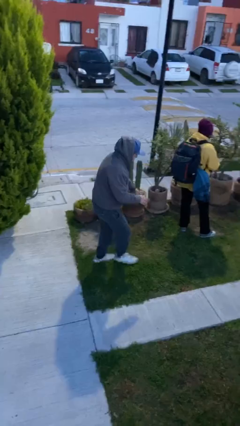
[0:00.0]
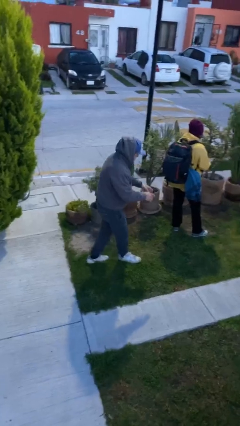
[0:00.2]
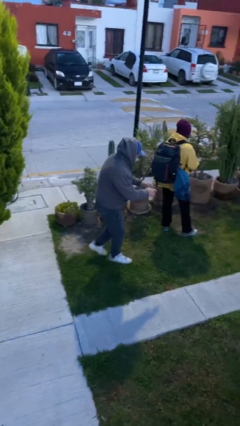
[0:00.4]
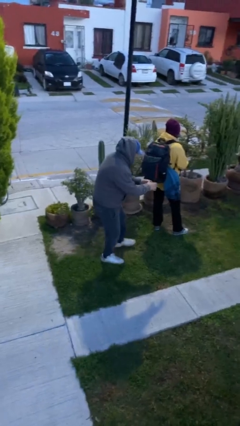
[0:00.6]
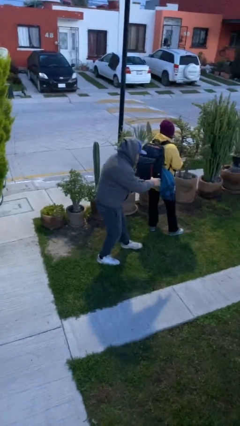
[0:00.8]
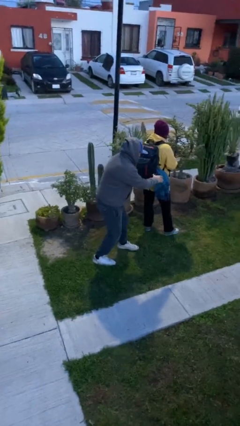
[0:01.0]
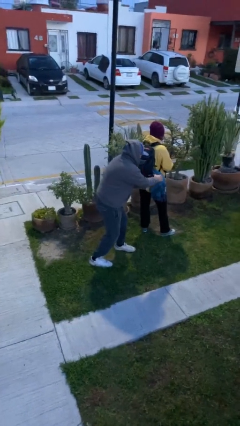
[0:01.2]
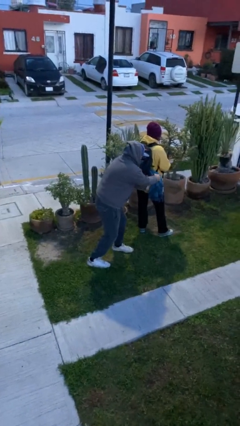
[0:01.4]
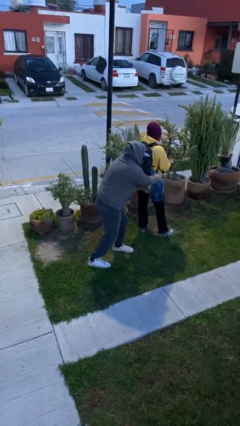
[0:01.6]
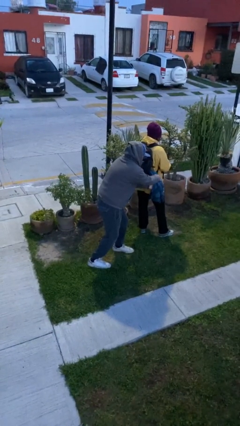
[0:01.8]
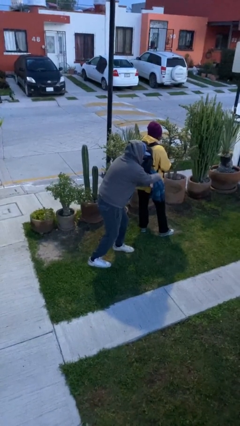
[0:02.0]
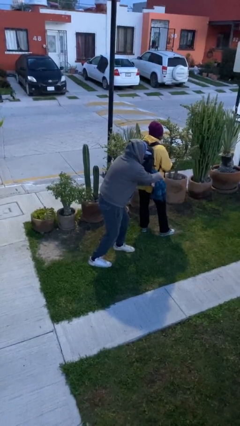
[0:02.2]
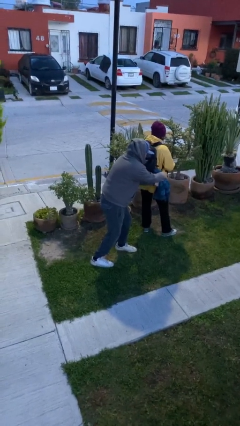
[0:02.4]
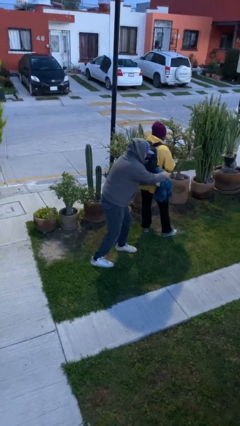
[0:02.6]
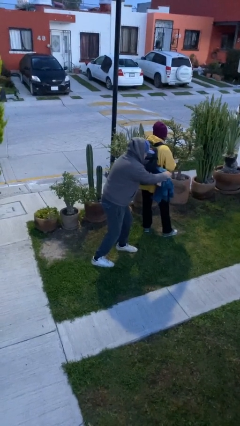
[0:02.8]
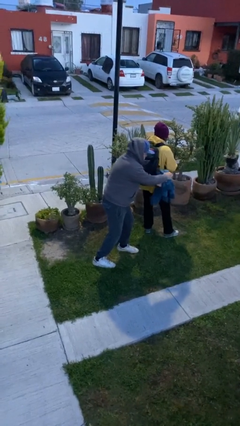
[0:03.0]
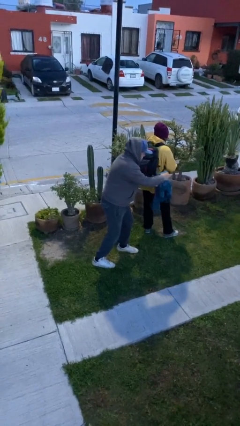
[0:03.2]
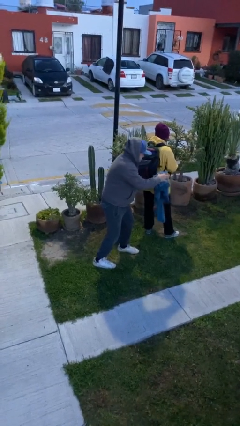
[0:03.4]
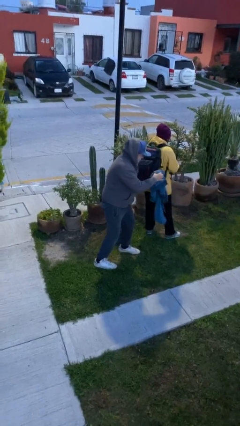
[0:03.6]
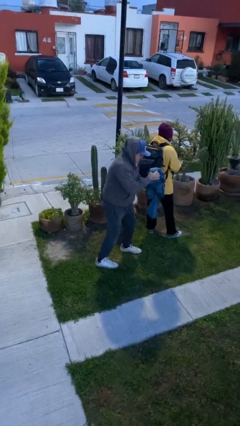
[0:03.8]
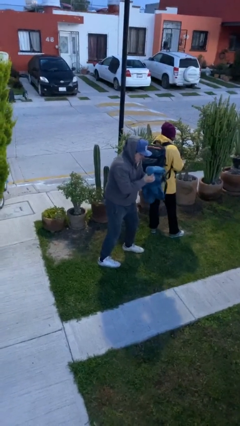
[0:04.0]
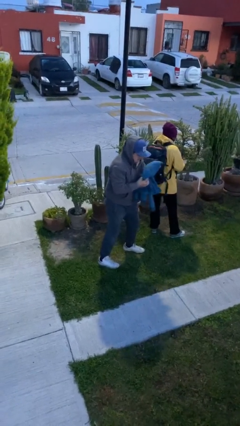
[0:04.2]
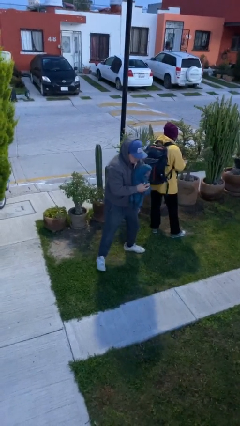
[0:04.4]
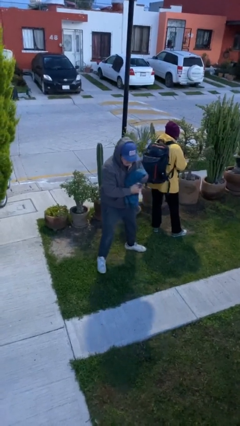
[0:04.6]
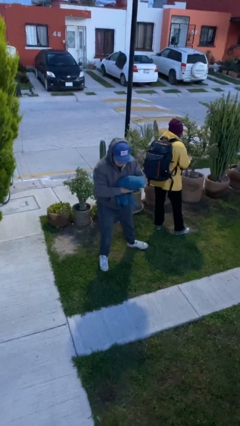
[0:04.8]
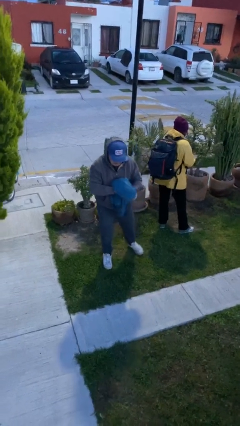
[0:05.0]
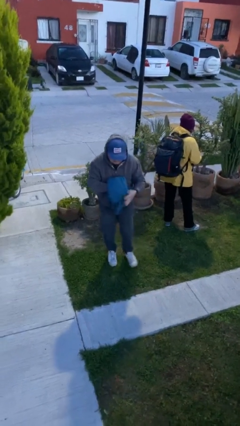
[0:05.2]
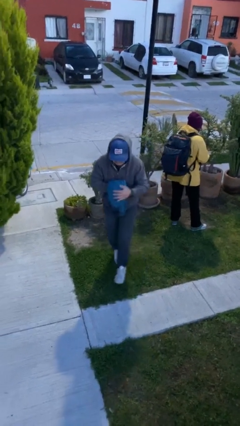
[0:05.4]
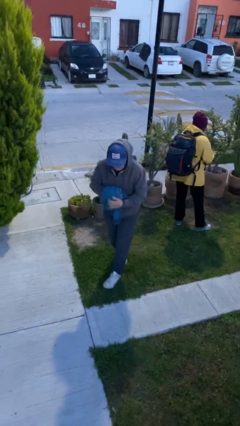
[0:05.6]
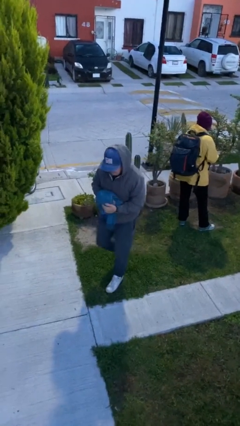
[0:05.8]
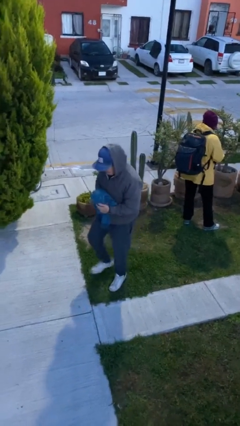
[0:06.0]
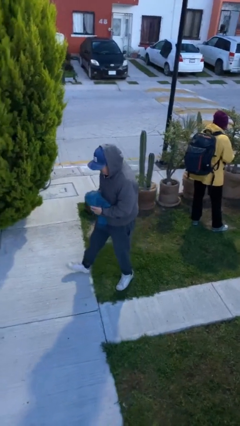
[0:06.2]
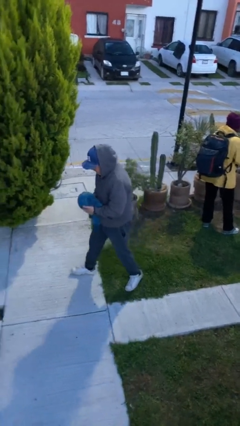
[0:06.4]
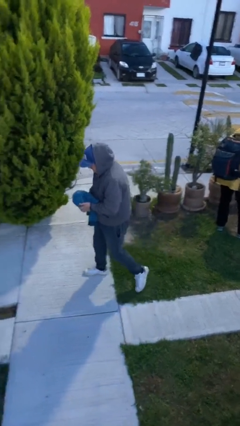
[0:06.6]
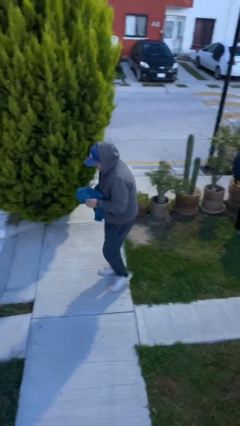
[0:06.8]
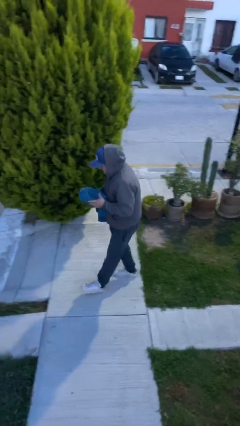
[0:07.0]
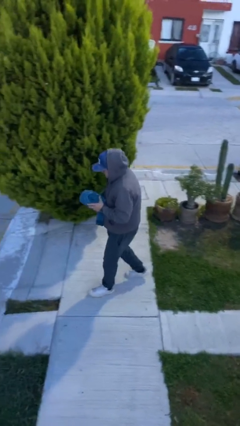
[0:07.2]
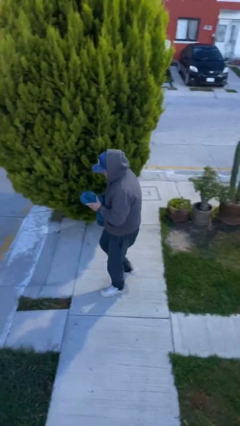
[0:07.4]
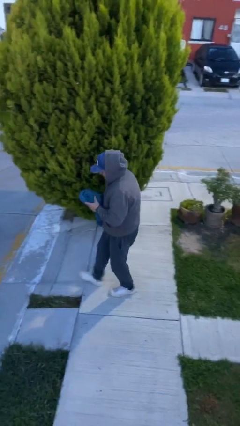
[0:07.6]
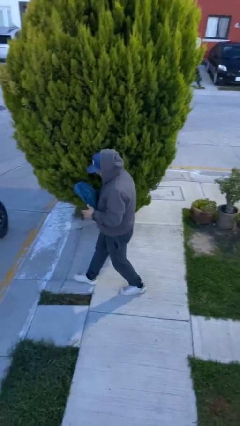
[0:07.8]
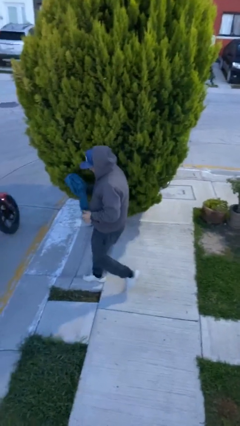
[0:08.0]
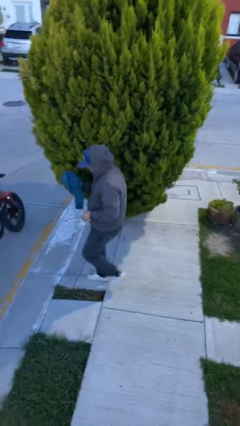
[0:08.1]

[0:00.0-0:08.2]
person steals object from person

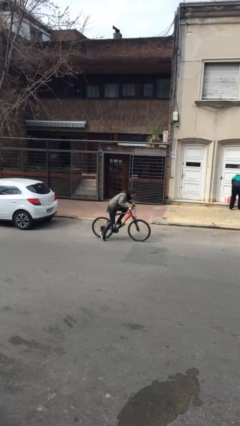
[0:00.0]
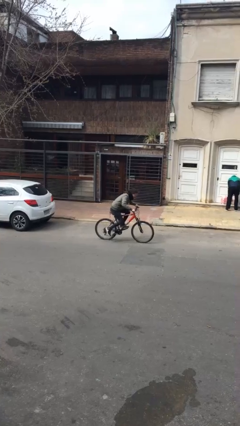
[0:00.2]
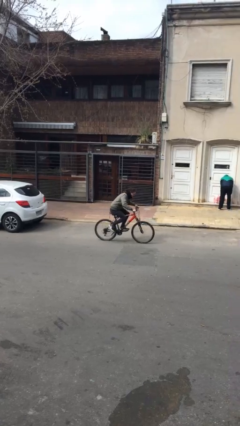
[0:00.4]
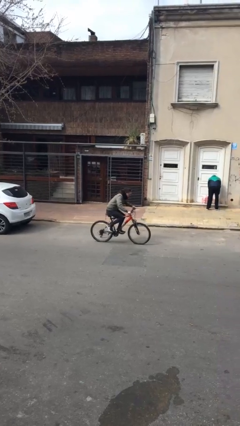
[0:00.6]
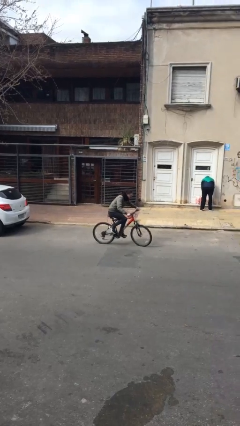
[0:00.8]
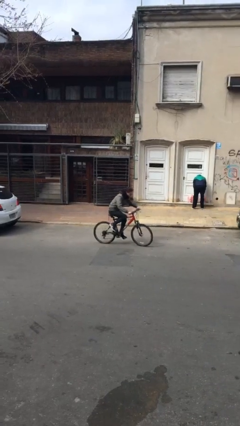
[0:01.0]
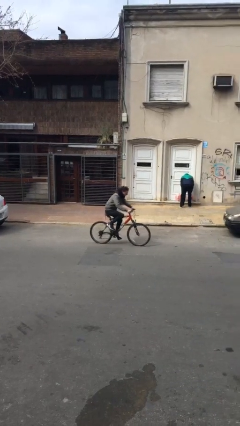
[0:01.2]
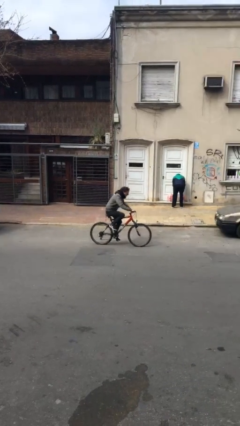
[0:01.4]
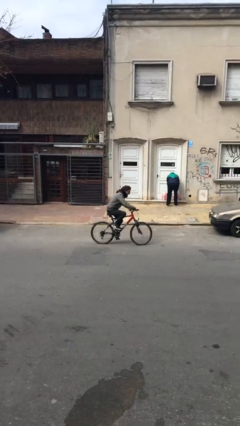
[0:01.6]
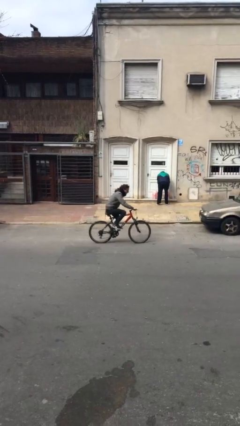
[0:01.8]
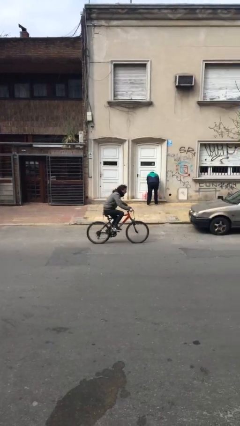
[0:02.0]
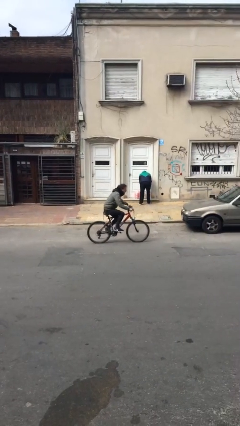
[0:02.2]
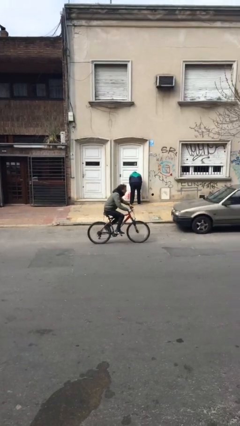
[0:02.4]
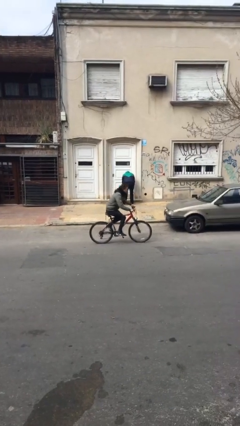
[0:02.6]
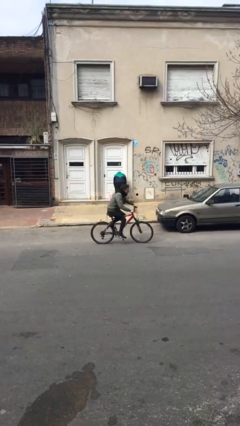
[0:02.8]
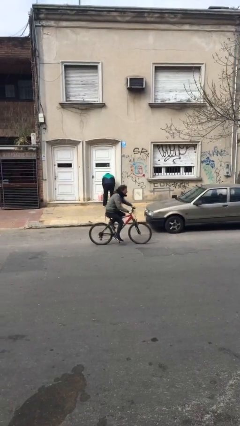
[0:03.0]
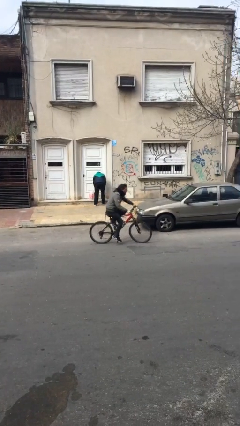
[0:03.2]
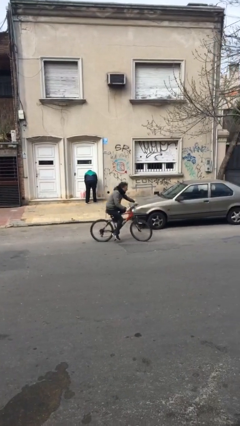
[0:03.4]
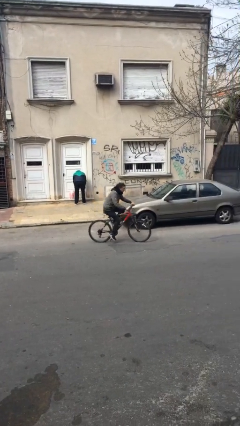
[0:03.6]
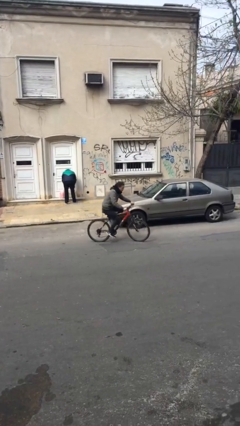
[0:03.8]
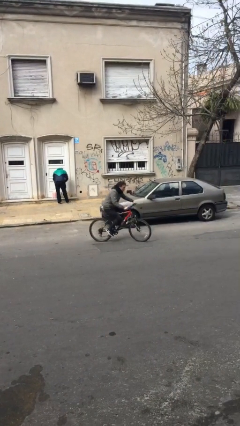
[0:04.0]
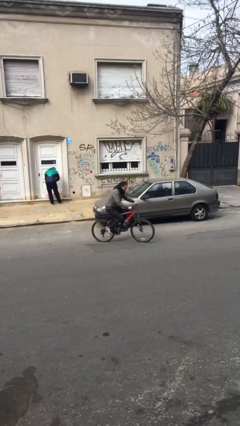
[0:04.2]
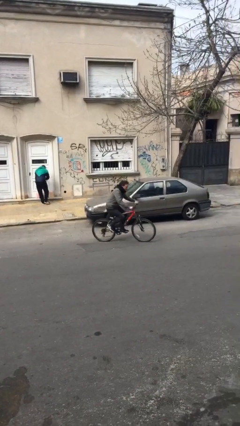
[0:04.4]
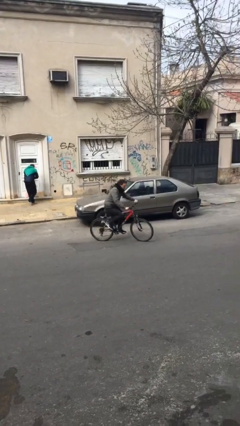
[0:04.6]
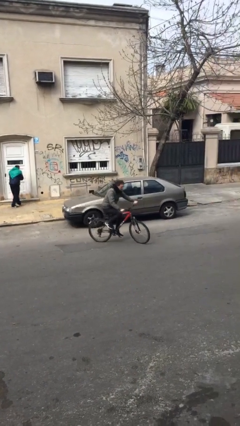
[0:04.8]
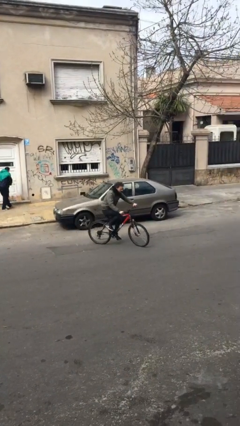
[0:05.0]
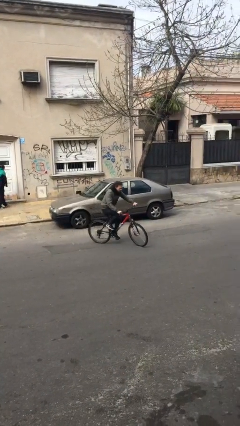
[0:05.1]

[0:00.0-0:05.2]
person rides bicycle

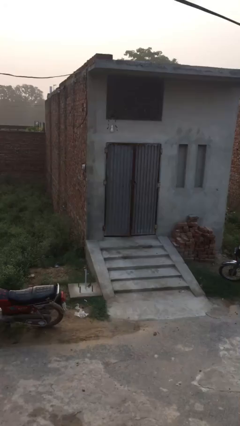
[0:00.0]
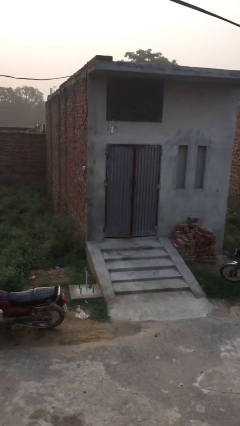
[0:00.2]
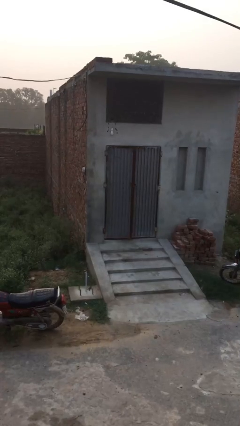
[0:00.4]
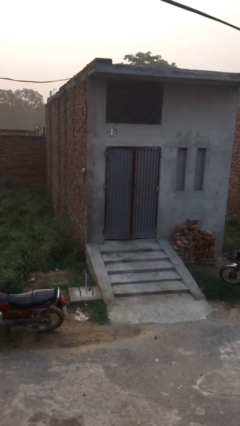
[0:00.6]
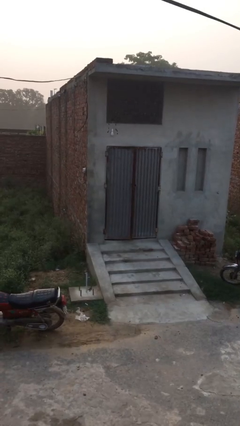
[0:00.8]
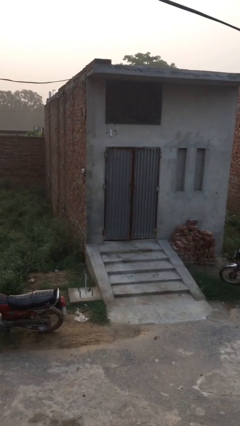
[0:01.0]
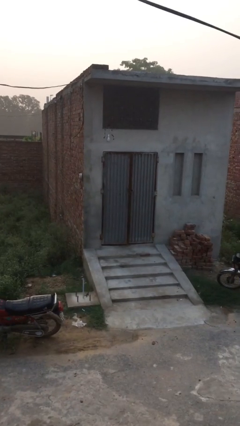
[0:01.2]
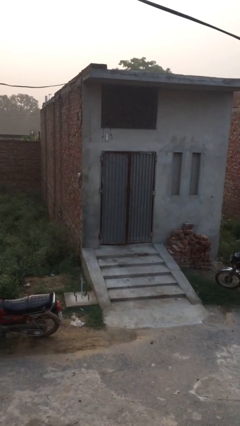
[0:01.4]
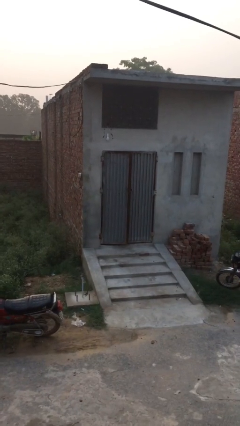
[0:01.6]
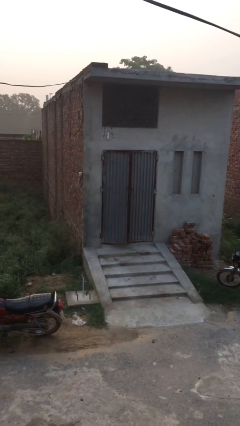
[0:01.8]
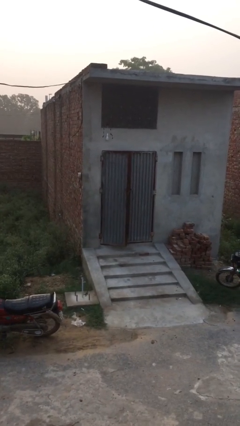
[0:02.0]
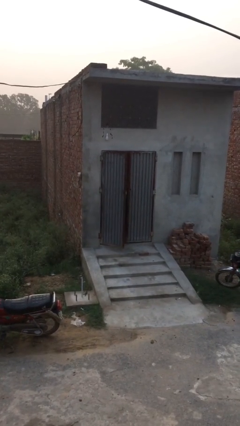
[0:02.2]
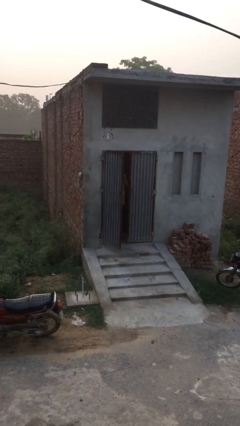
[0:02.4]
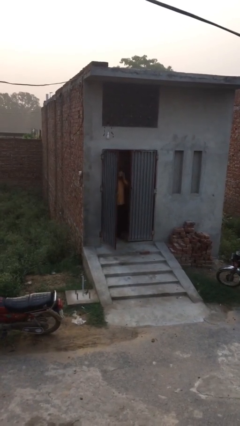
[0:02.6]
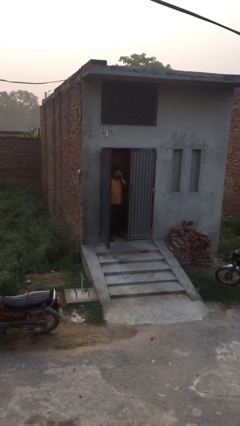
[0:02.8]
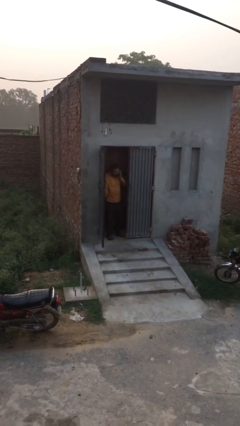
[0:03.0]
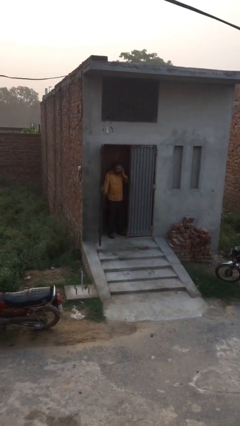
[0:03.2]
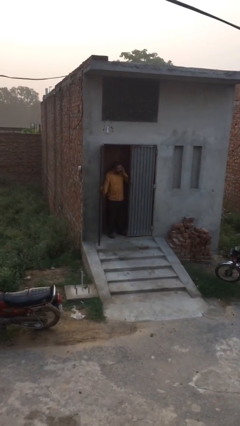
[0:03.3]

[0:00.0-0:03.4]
person opens facility door

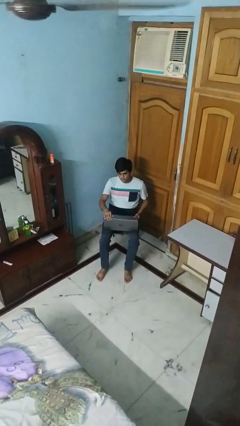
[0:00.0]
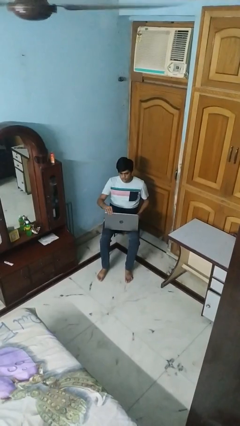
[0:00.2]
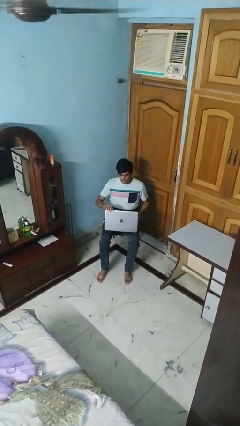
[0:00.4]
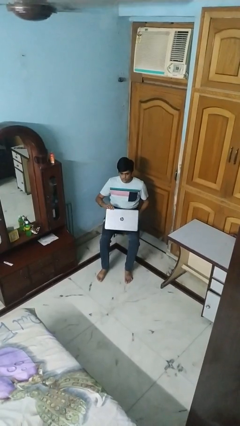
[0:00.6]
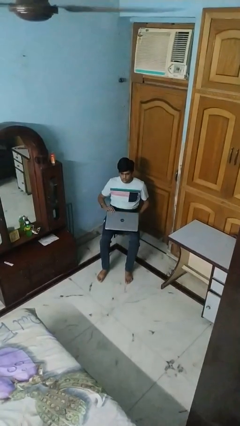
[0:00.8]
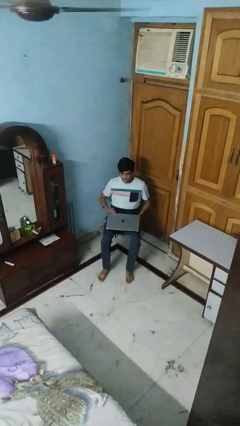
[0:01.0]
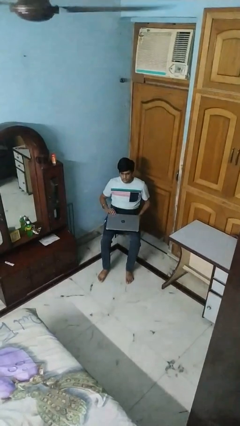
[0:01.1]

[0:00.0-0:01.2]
person closes laptop
